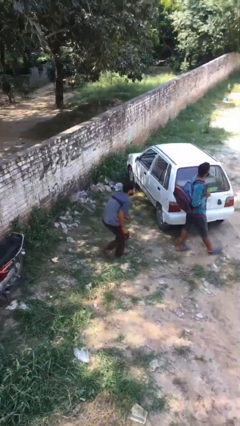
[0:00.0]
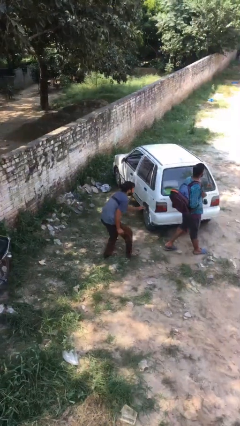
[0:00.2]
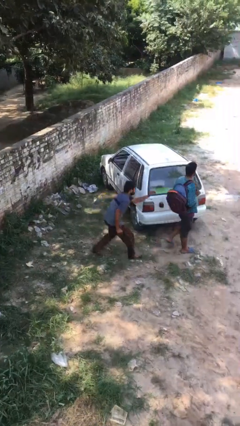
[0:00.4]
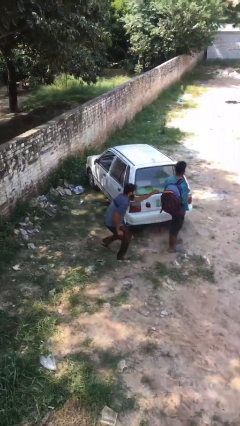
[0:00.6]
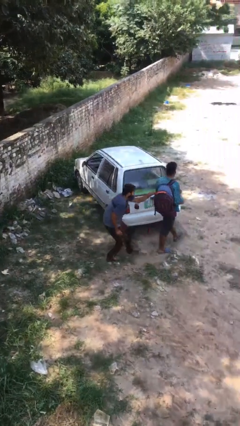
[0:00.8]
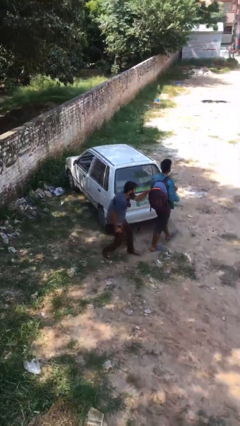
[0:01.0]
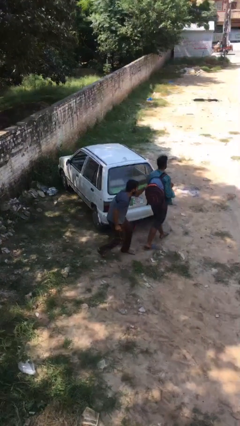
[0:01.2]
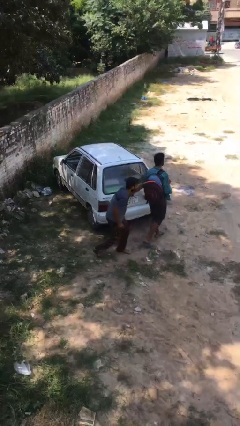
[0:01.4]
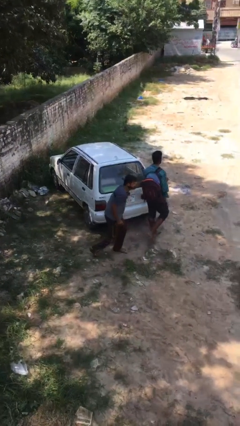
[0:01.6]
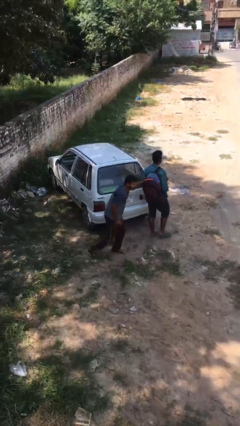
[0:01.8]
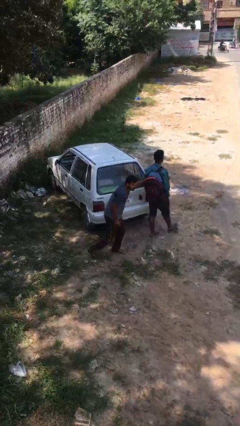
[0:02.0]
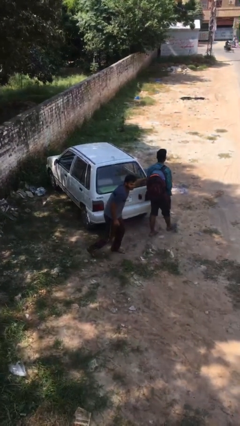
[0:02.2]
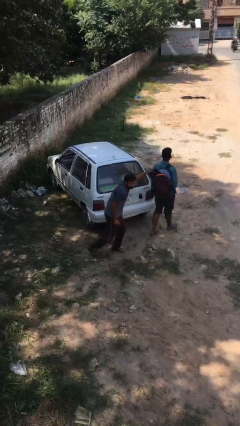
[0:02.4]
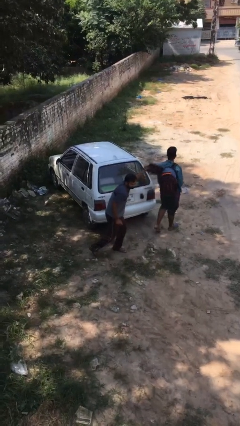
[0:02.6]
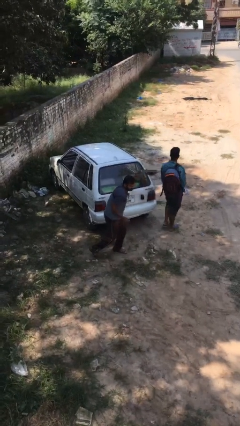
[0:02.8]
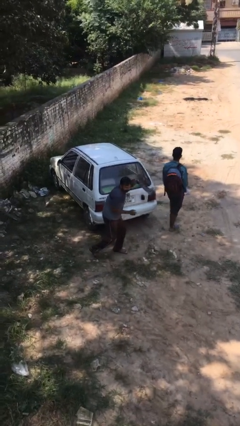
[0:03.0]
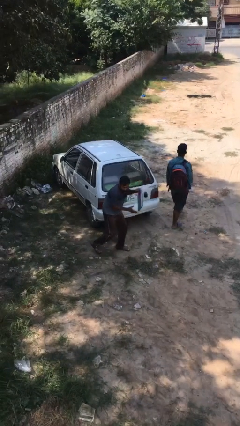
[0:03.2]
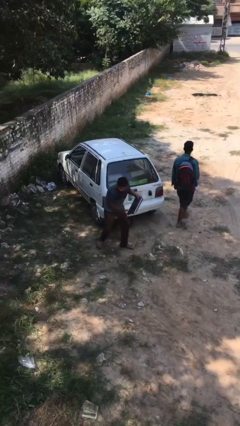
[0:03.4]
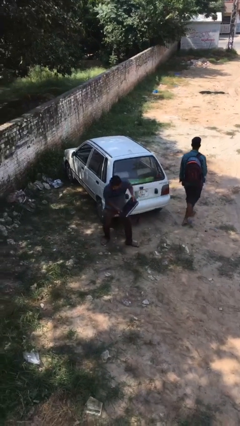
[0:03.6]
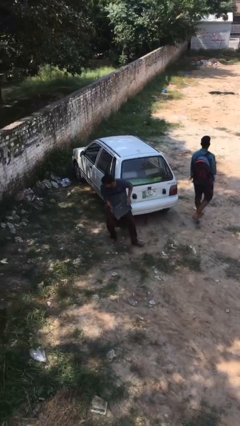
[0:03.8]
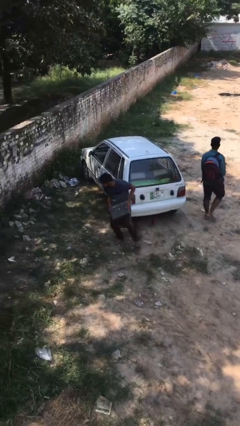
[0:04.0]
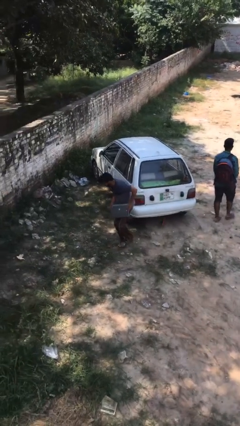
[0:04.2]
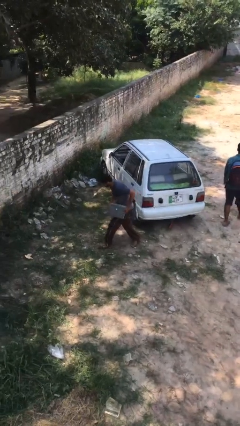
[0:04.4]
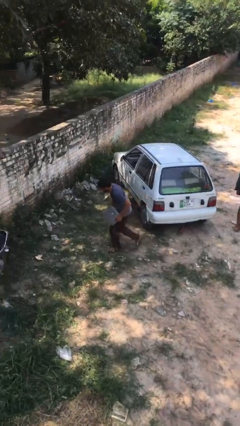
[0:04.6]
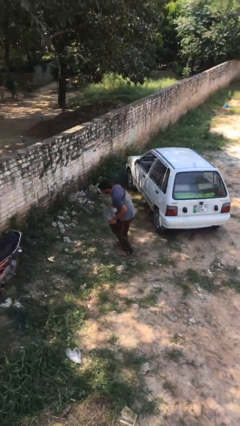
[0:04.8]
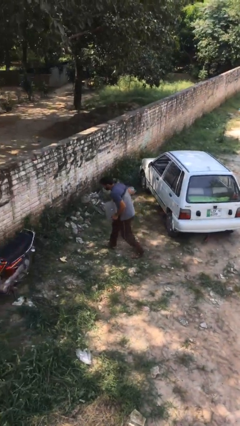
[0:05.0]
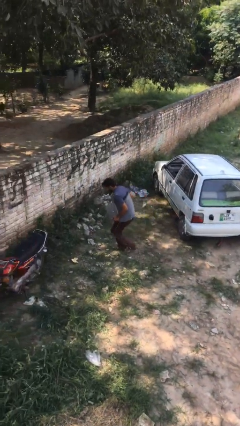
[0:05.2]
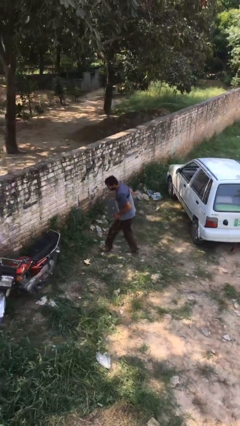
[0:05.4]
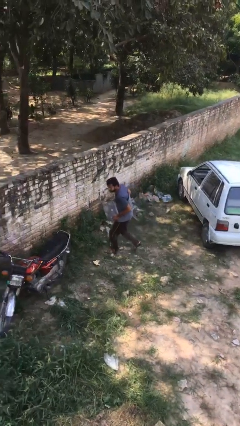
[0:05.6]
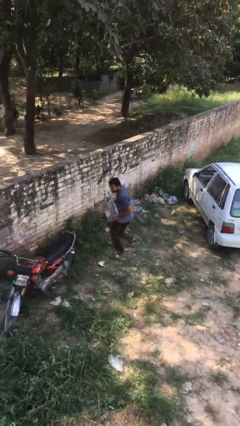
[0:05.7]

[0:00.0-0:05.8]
person steals object from person

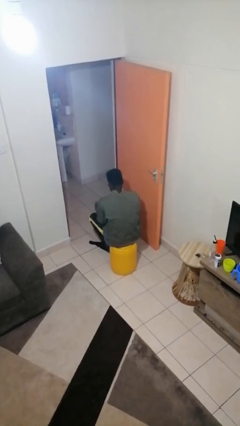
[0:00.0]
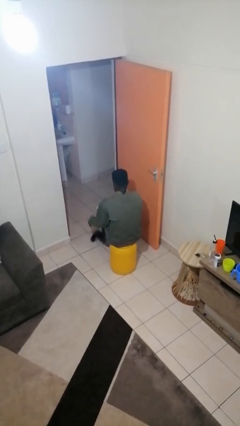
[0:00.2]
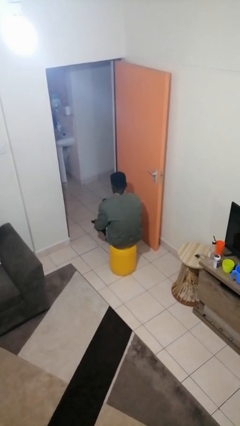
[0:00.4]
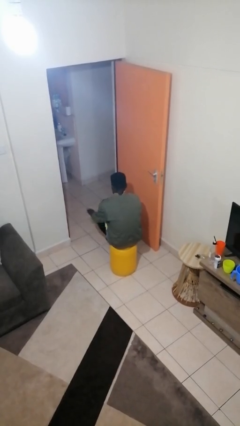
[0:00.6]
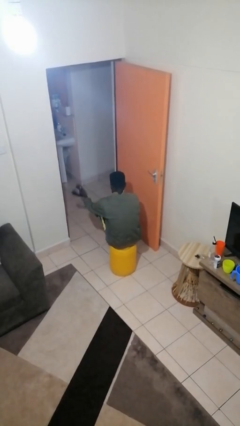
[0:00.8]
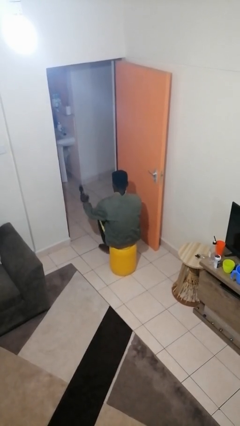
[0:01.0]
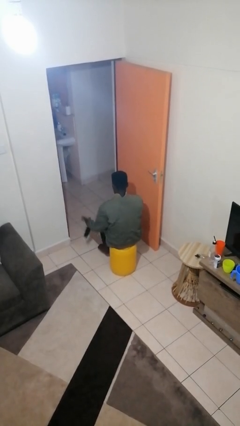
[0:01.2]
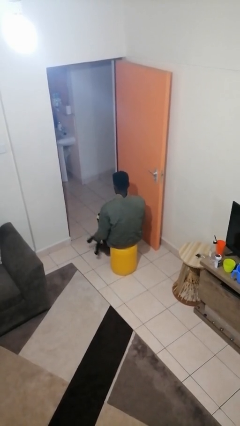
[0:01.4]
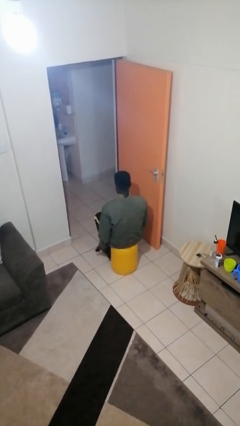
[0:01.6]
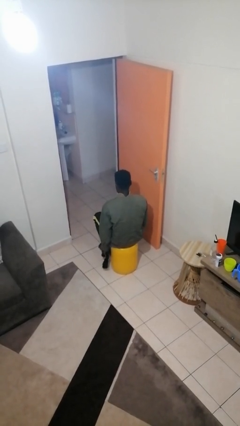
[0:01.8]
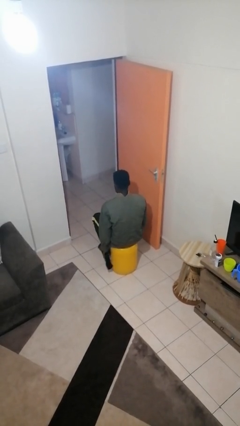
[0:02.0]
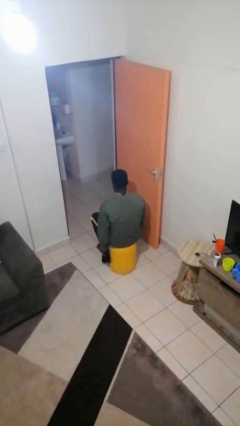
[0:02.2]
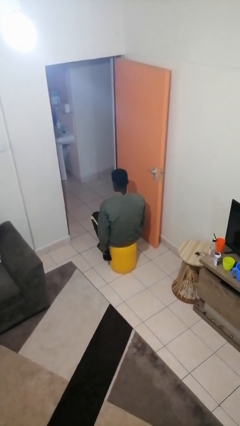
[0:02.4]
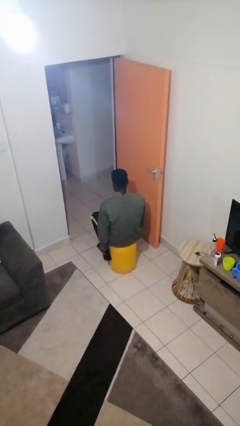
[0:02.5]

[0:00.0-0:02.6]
person takes off socks

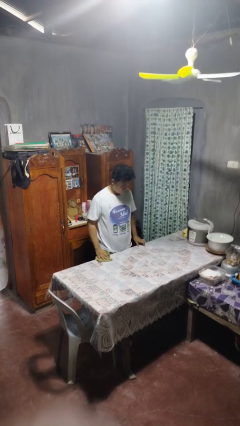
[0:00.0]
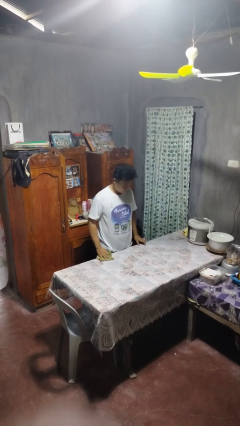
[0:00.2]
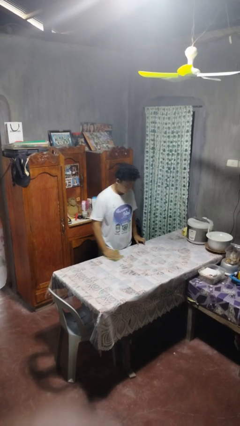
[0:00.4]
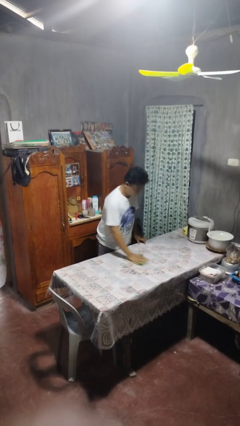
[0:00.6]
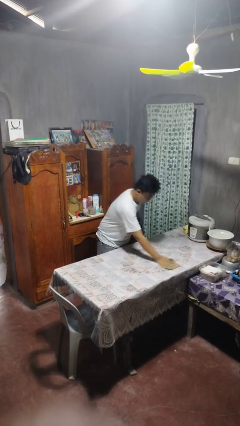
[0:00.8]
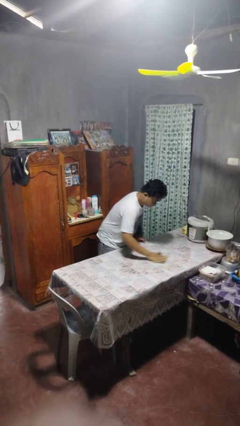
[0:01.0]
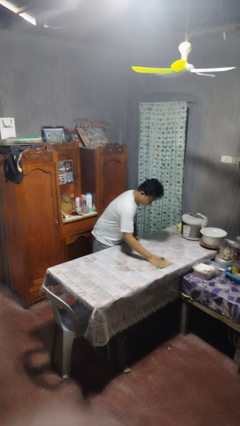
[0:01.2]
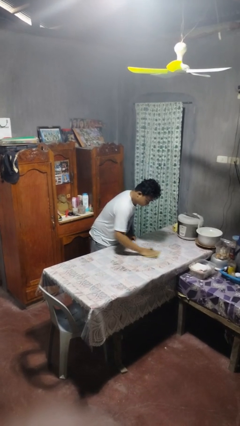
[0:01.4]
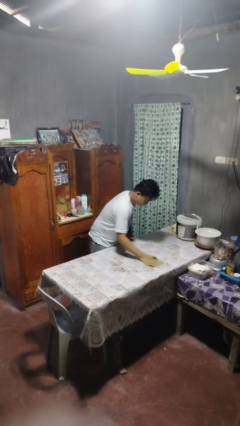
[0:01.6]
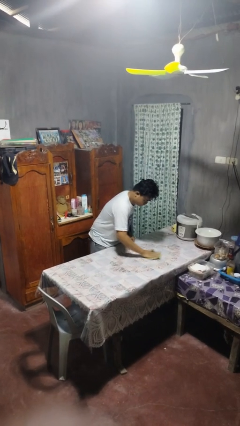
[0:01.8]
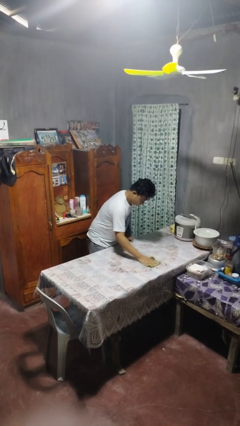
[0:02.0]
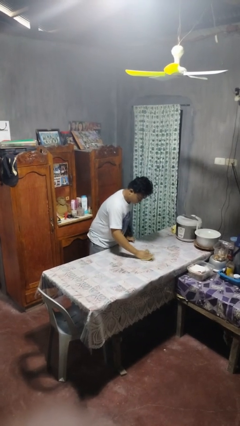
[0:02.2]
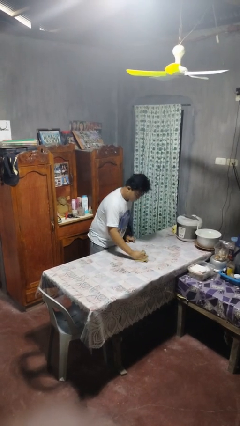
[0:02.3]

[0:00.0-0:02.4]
person cleans table with rag

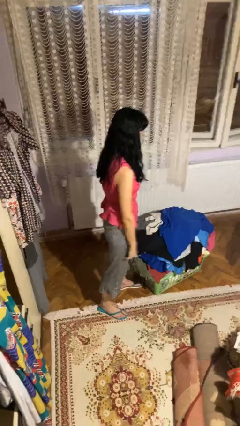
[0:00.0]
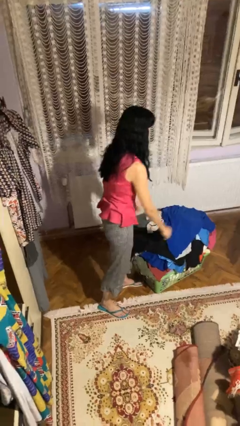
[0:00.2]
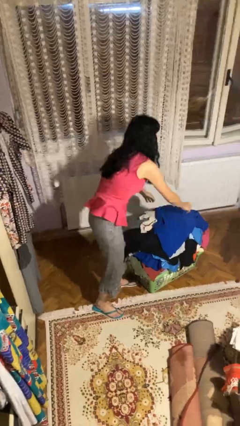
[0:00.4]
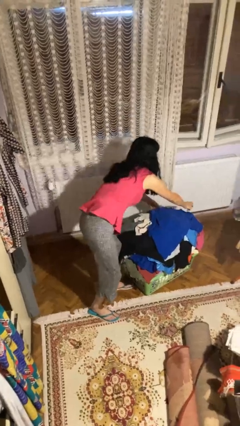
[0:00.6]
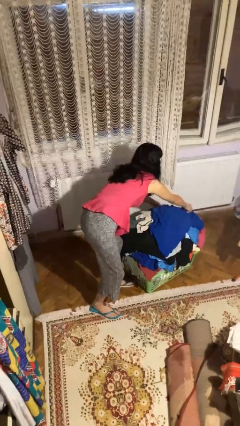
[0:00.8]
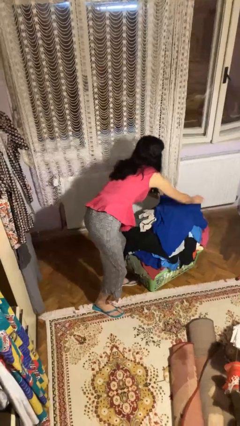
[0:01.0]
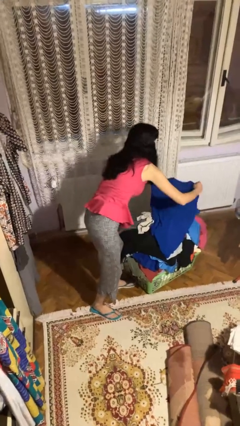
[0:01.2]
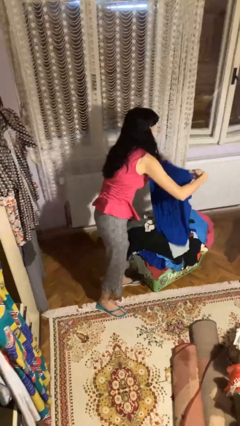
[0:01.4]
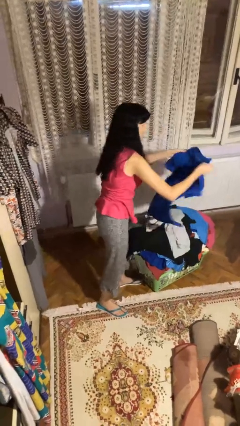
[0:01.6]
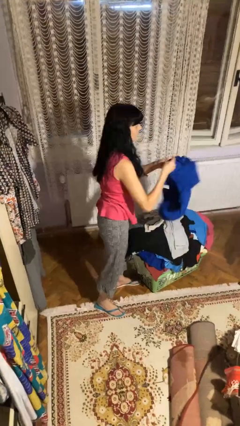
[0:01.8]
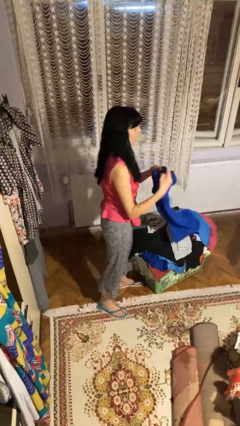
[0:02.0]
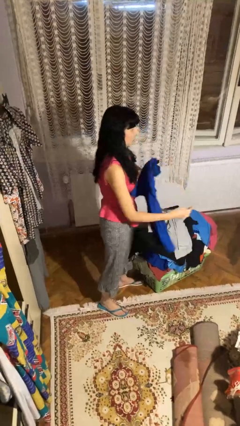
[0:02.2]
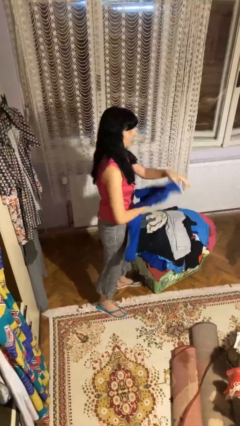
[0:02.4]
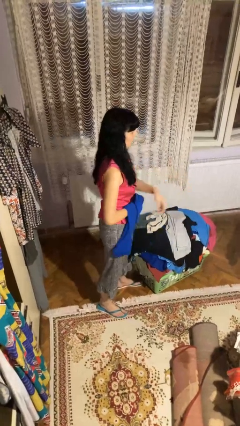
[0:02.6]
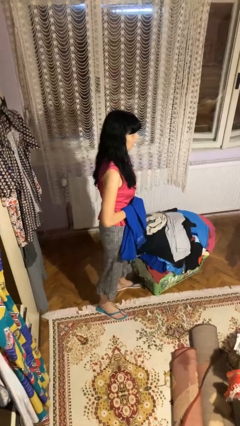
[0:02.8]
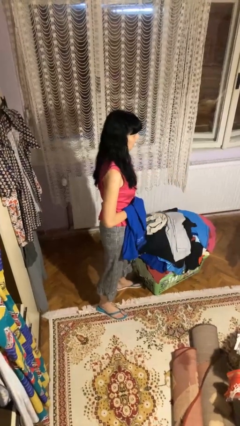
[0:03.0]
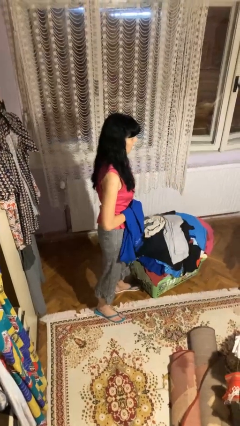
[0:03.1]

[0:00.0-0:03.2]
person folds shirt

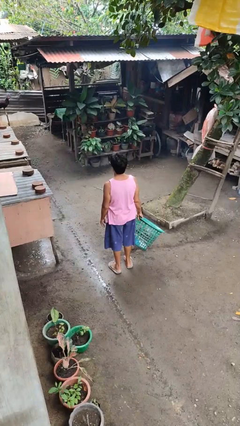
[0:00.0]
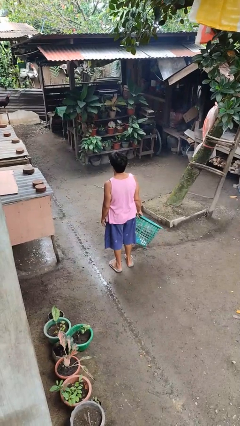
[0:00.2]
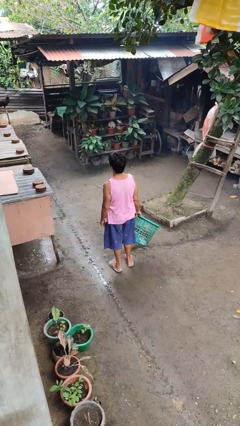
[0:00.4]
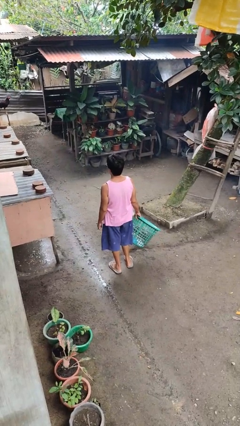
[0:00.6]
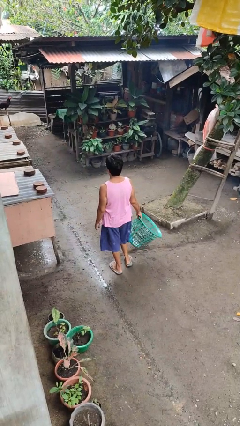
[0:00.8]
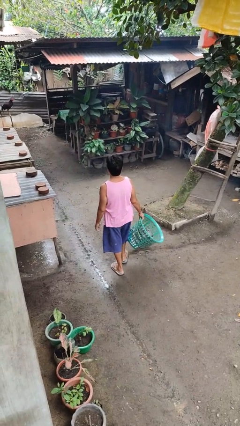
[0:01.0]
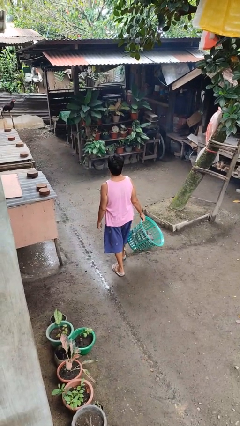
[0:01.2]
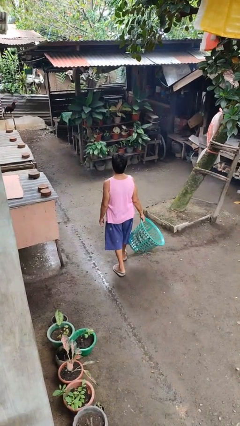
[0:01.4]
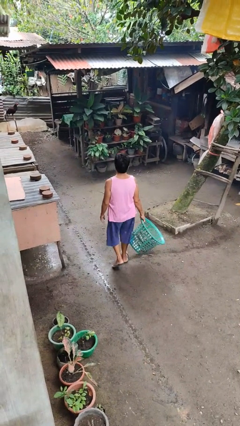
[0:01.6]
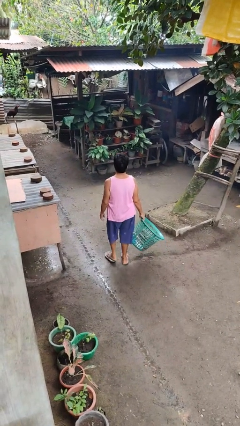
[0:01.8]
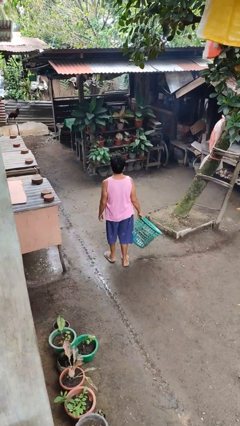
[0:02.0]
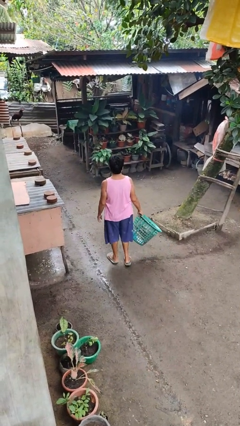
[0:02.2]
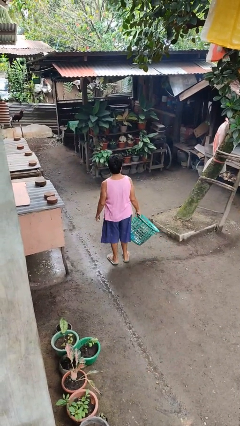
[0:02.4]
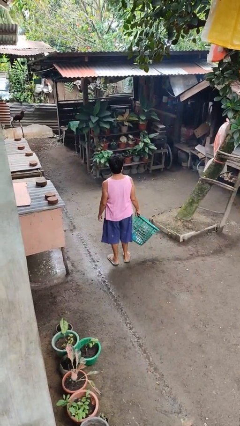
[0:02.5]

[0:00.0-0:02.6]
person carries laundry basket

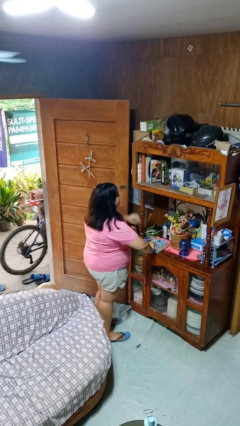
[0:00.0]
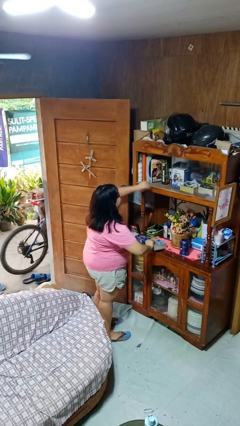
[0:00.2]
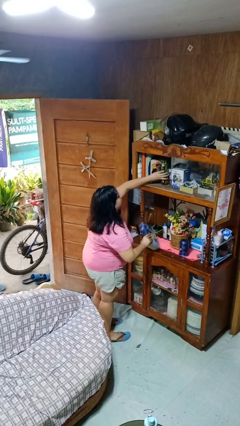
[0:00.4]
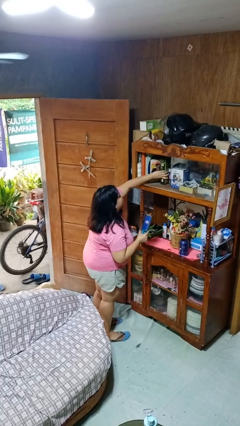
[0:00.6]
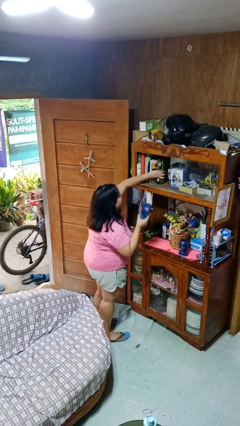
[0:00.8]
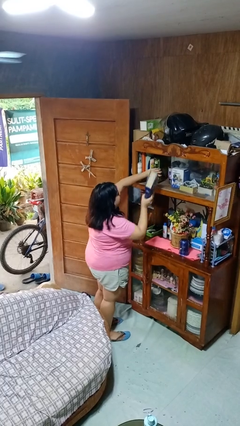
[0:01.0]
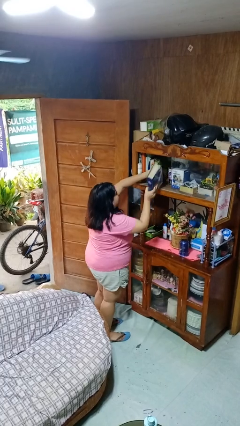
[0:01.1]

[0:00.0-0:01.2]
person puts down object on shelf
